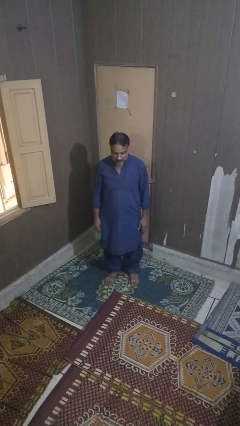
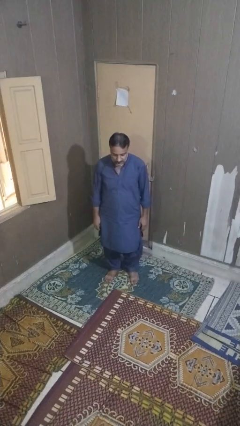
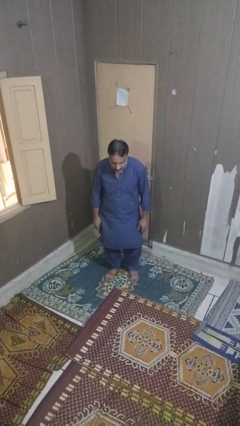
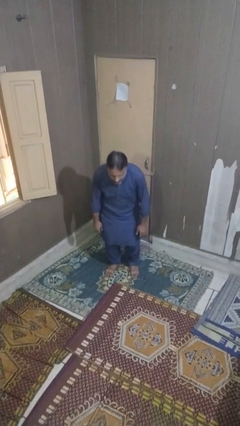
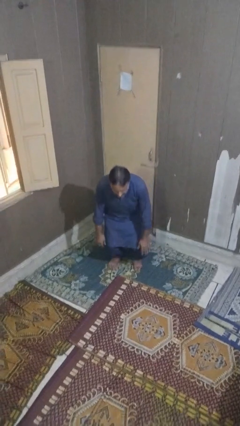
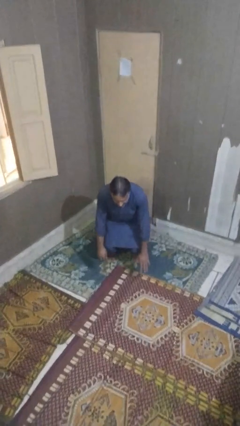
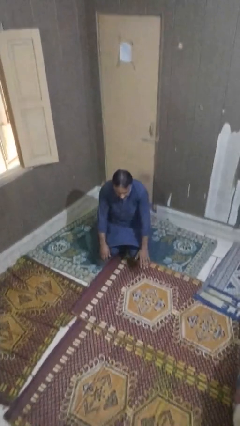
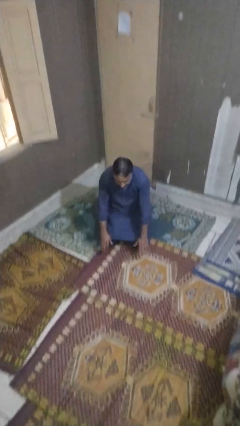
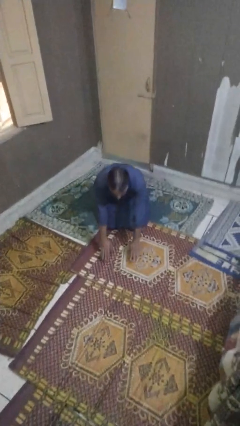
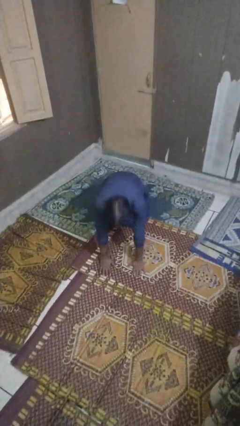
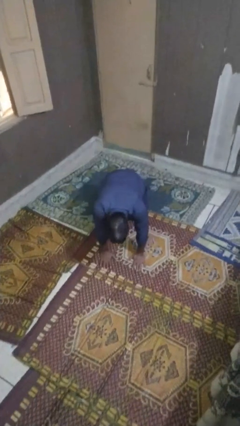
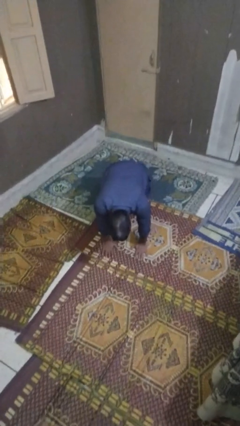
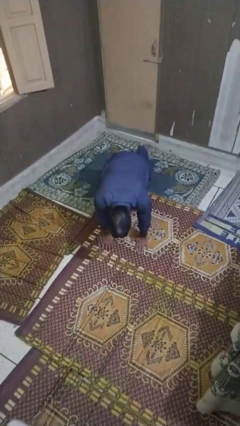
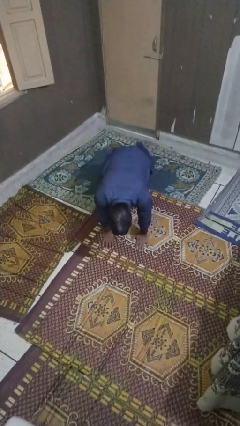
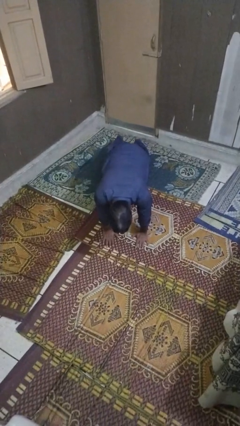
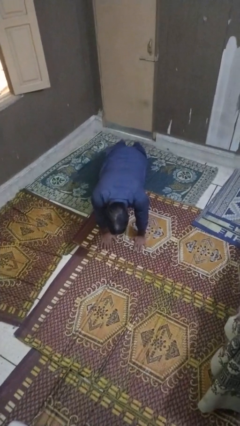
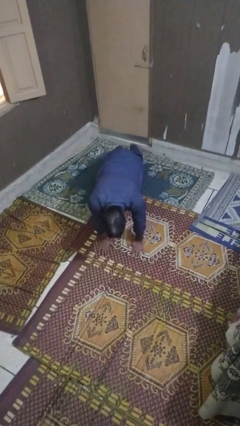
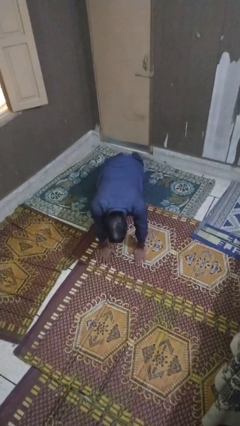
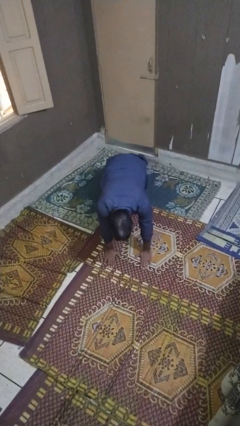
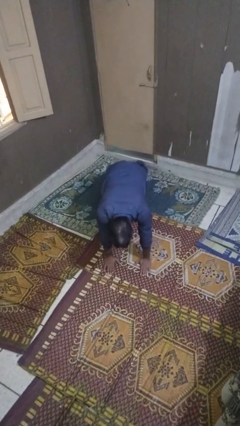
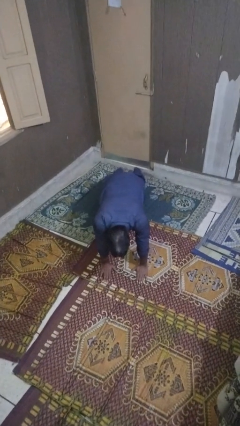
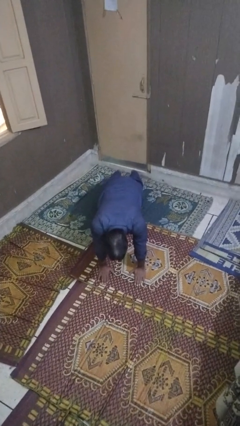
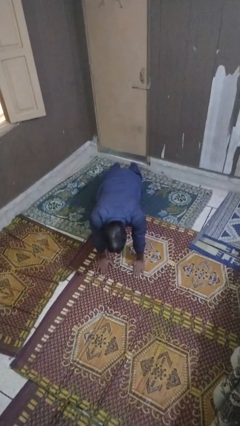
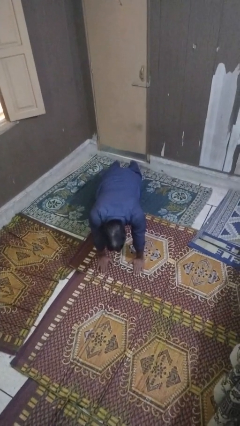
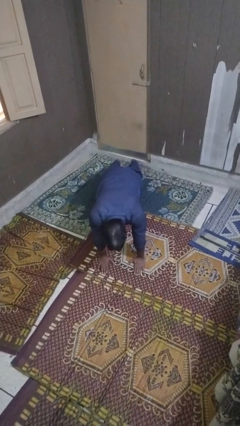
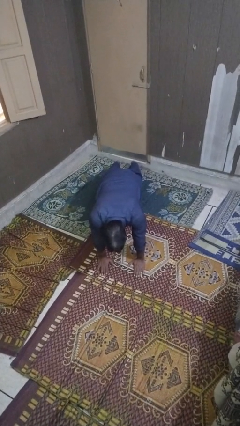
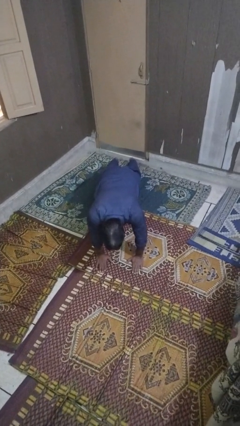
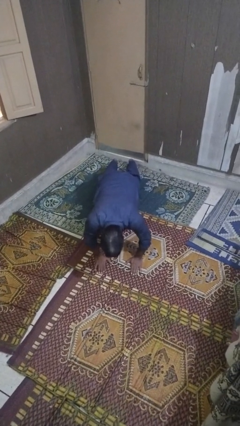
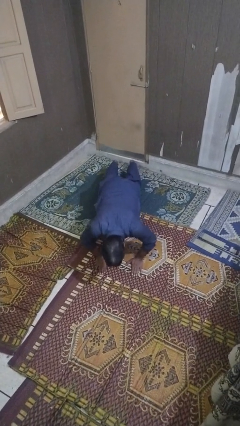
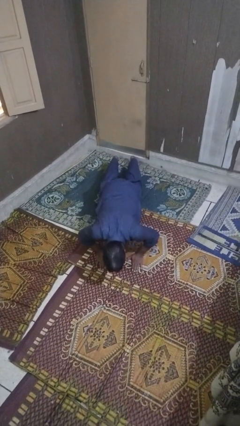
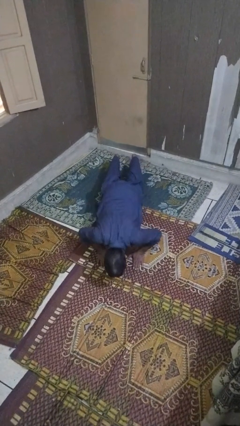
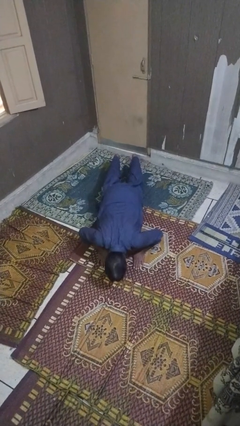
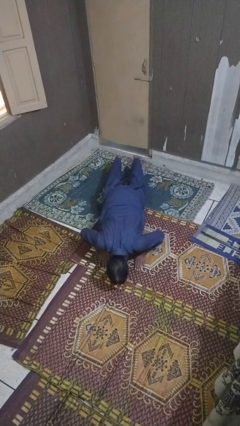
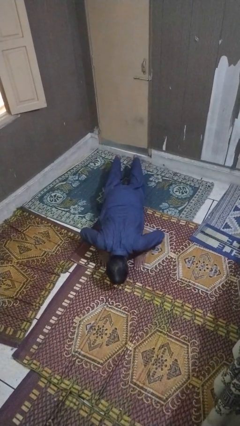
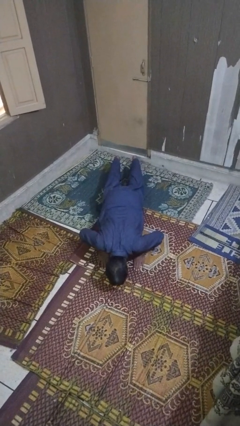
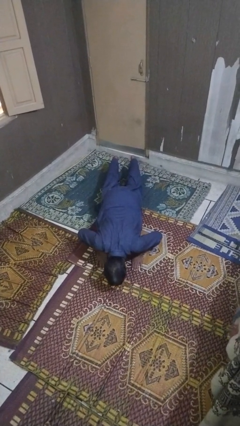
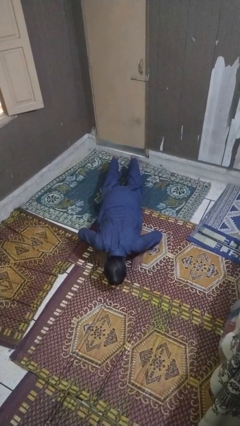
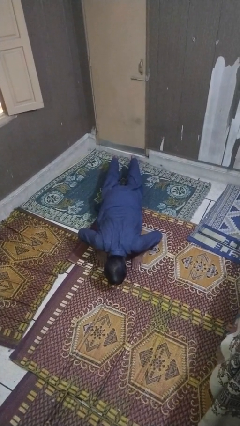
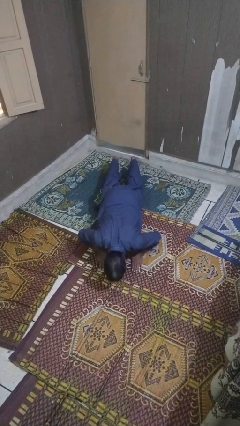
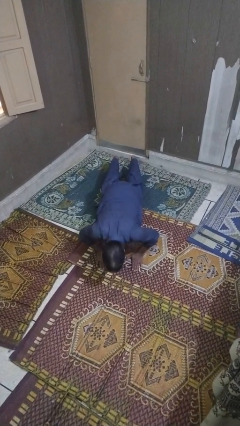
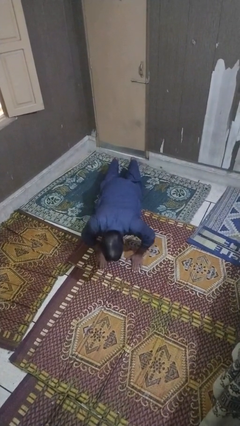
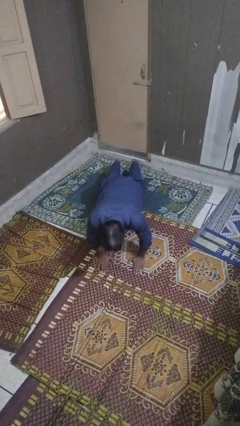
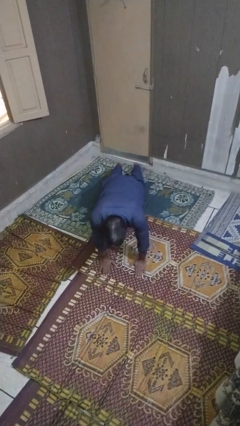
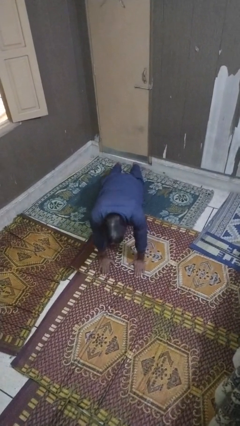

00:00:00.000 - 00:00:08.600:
person exercises with pushup

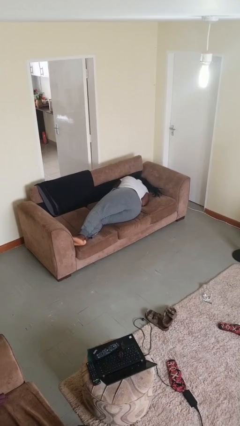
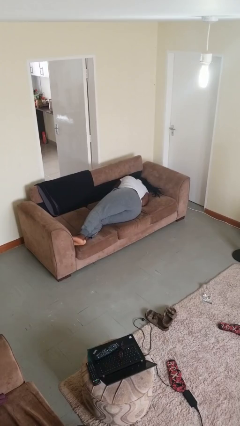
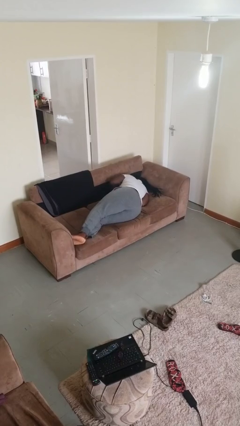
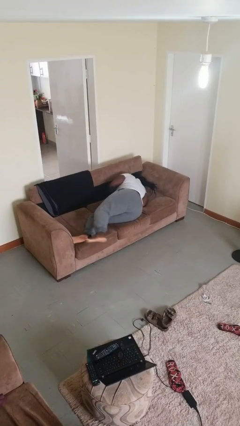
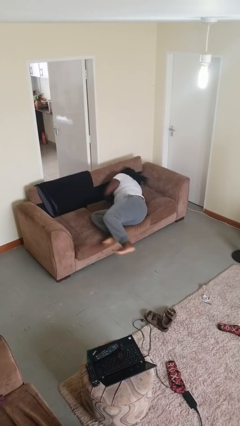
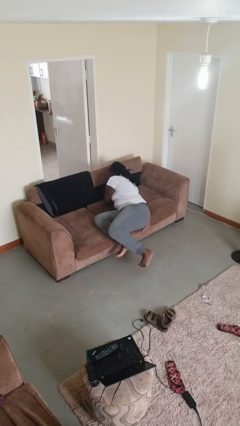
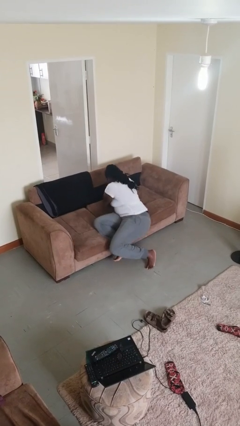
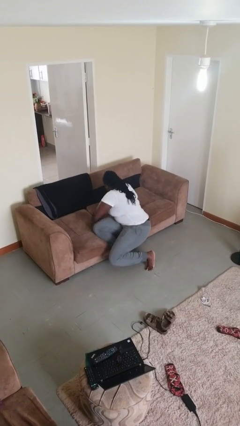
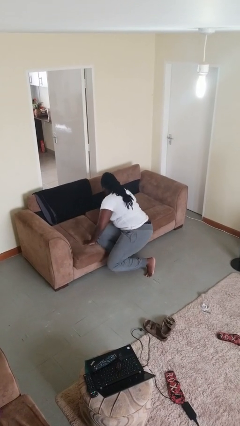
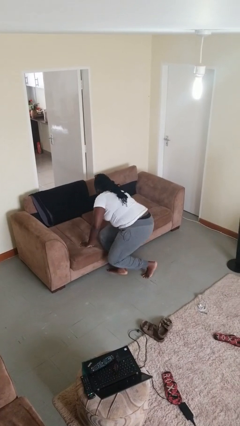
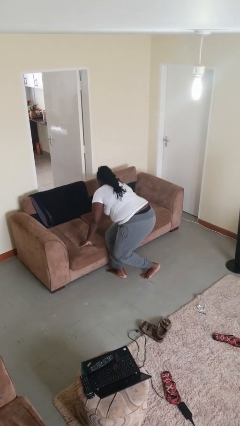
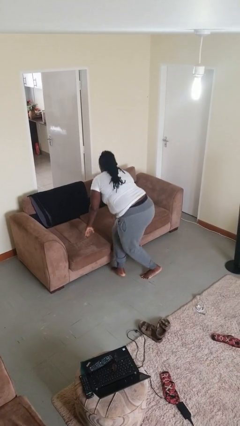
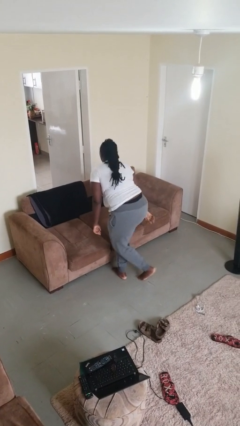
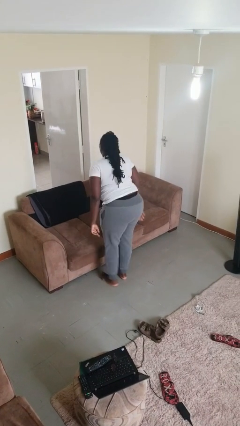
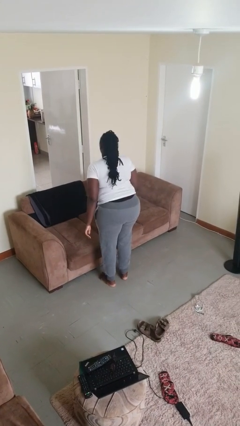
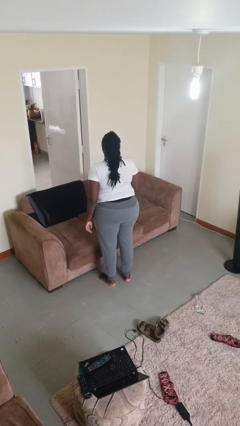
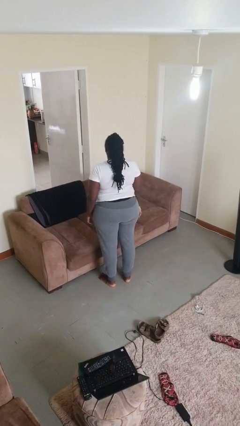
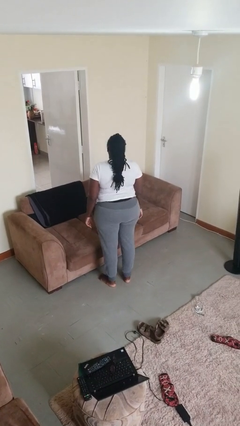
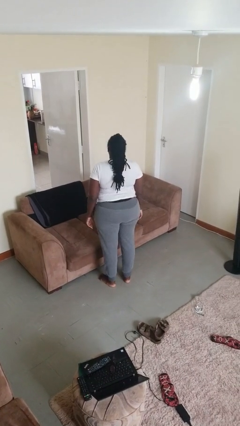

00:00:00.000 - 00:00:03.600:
person stands up

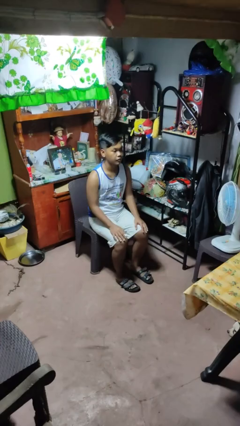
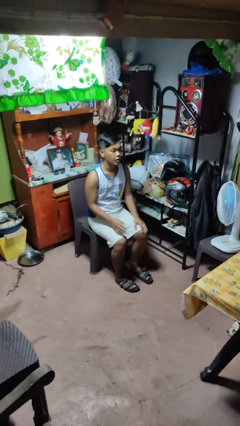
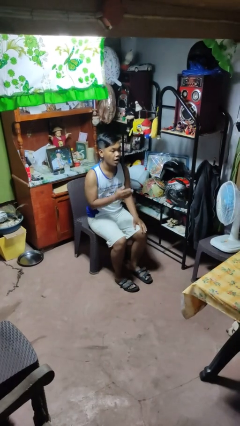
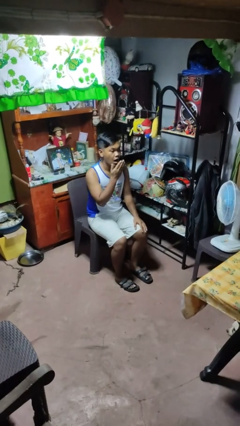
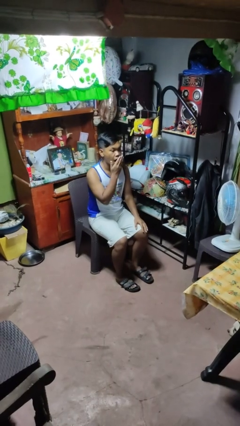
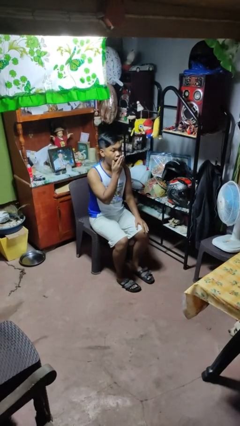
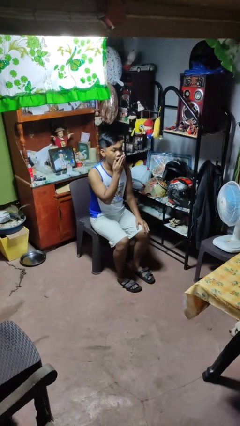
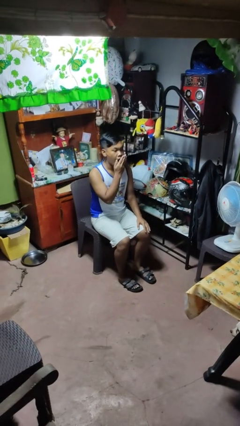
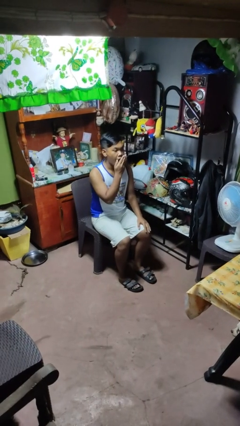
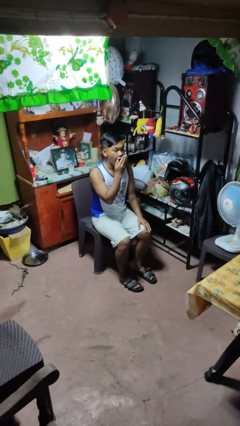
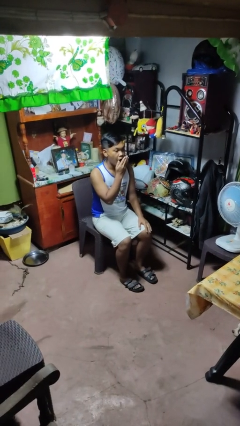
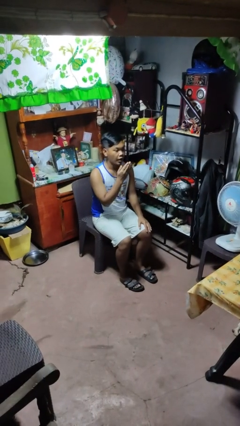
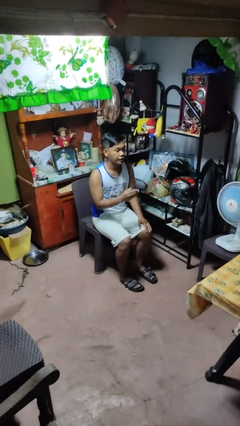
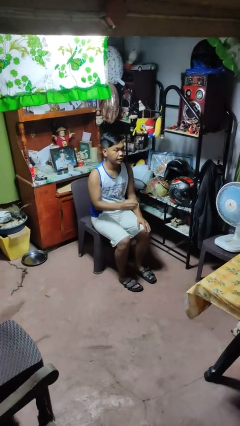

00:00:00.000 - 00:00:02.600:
person yawns

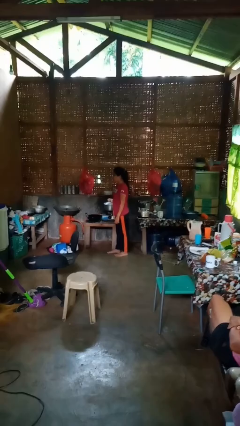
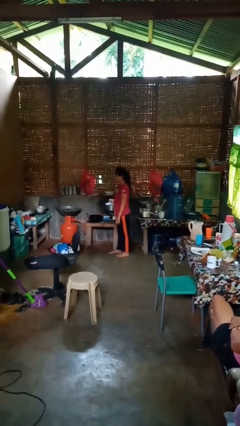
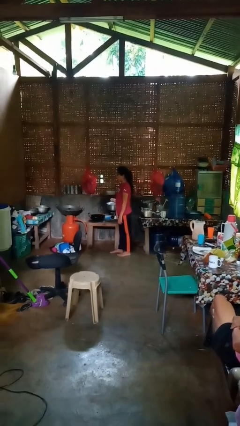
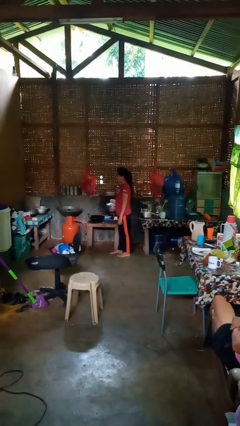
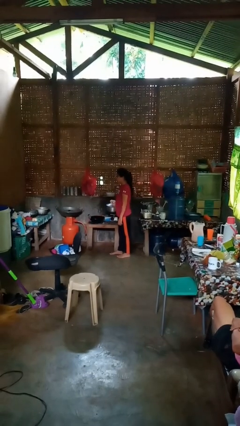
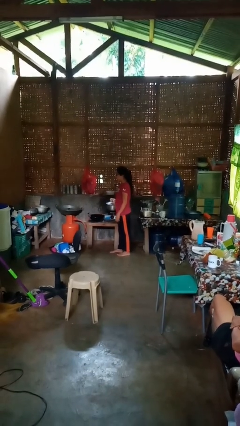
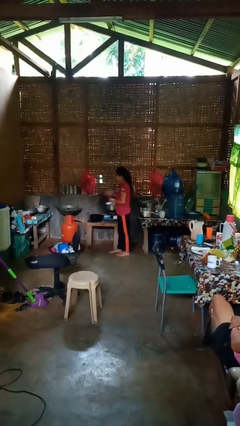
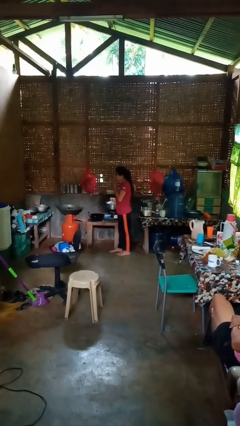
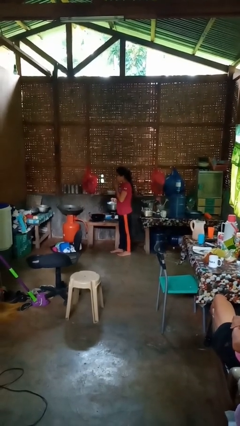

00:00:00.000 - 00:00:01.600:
person burns hand

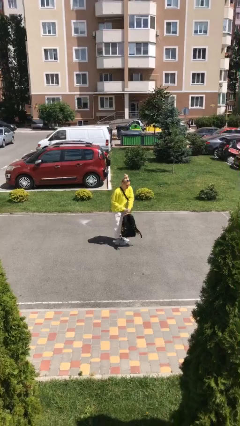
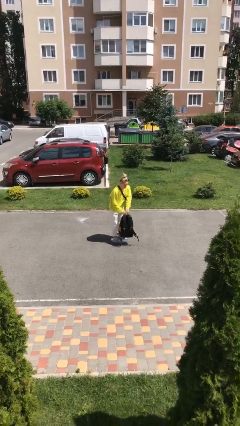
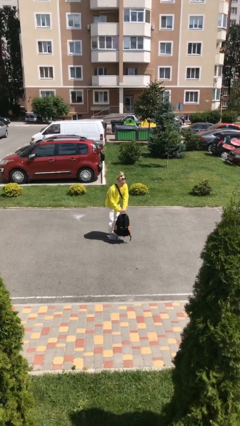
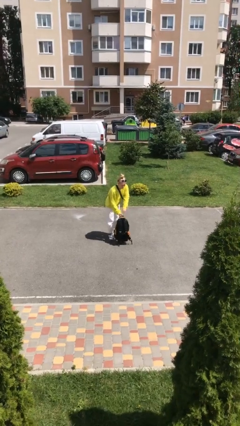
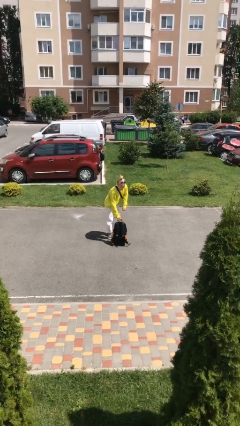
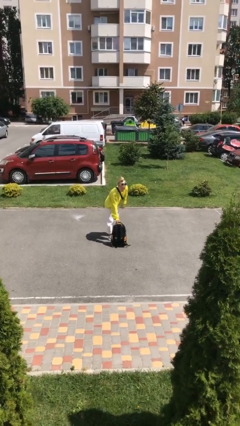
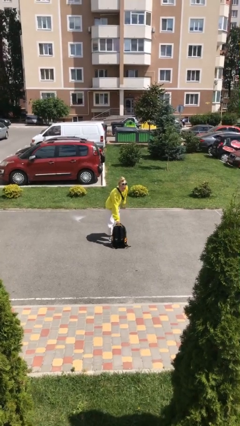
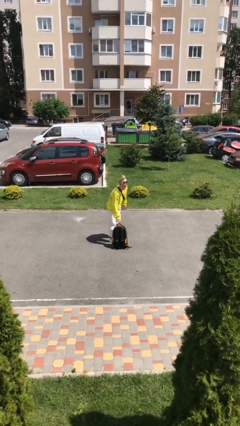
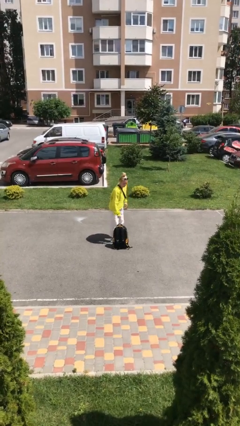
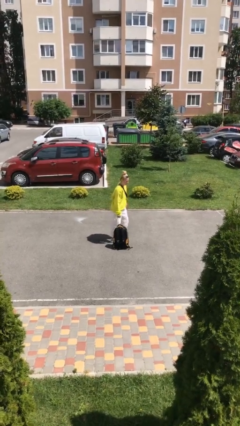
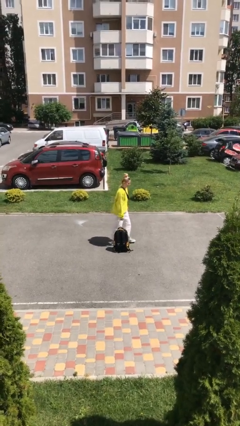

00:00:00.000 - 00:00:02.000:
person puts down object on floor
